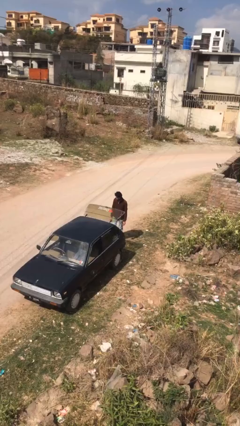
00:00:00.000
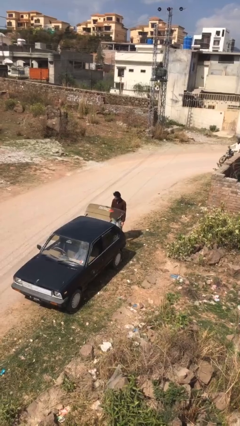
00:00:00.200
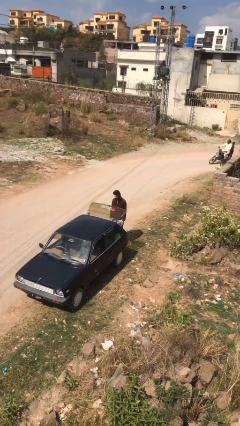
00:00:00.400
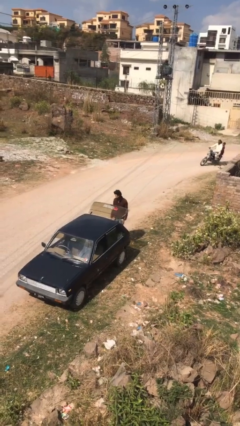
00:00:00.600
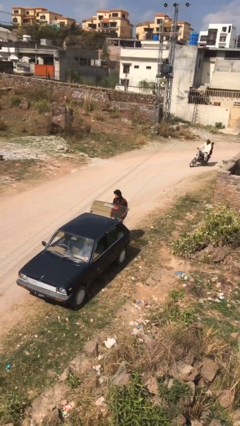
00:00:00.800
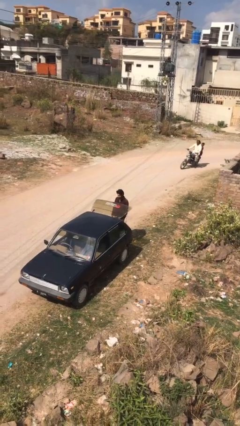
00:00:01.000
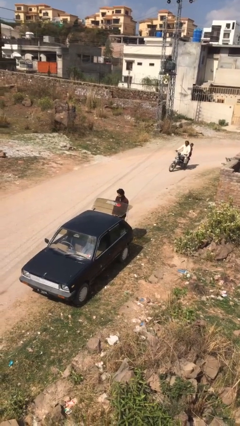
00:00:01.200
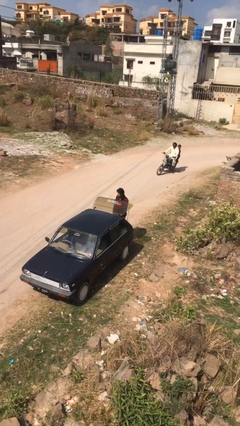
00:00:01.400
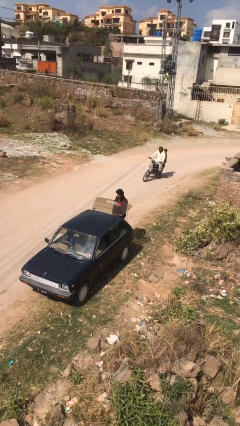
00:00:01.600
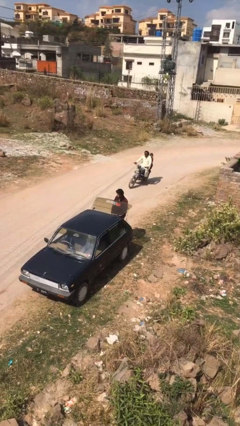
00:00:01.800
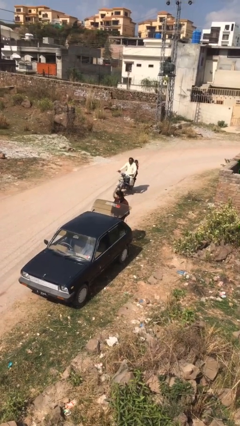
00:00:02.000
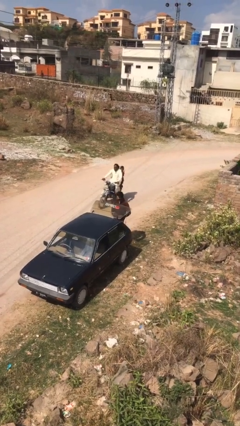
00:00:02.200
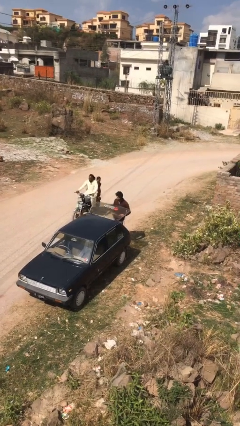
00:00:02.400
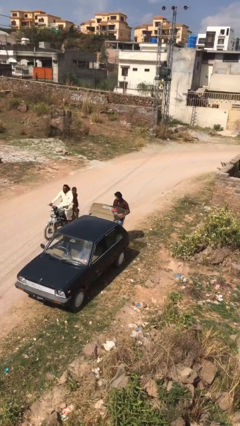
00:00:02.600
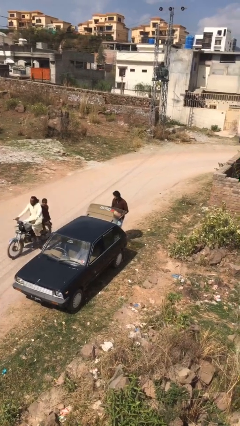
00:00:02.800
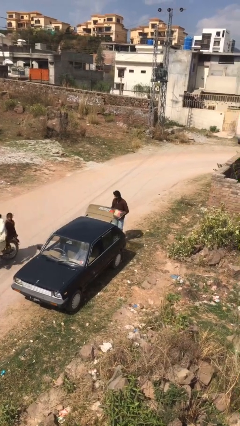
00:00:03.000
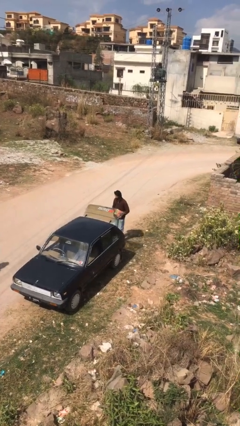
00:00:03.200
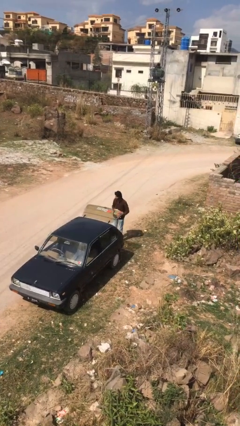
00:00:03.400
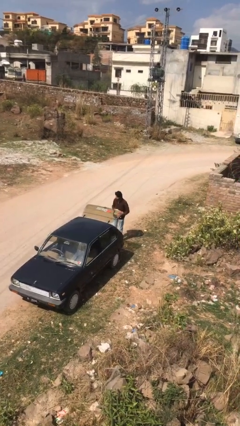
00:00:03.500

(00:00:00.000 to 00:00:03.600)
person unloads car

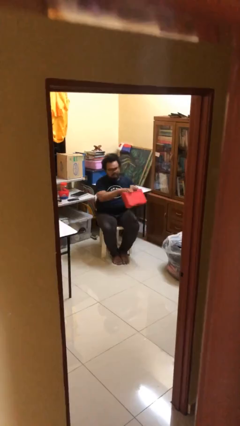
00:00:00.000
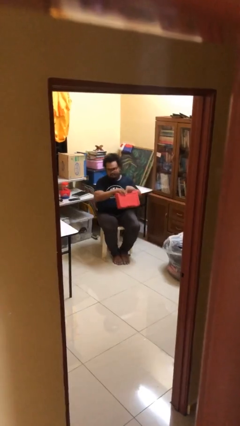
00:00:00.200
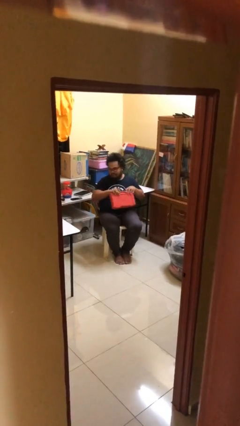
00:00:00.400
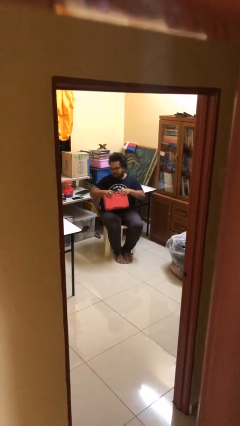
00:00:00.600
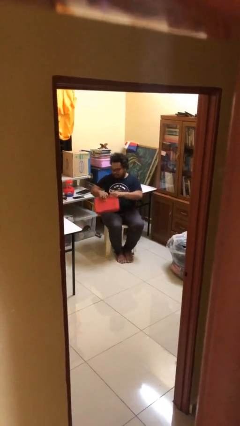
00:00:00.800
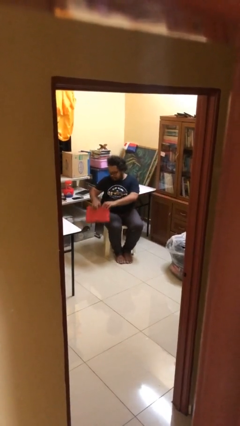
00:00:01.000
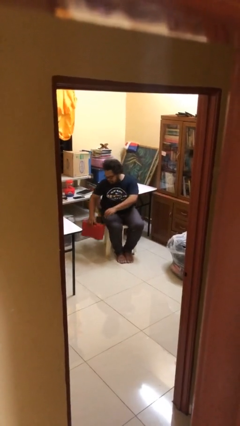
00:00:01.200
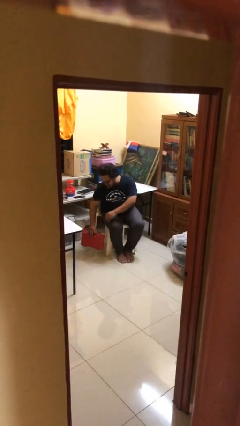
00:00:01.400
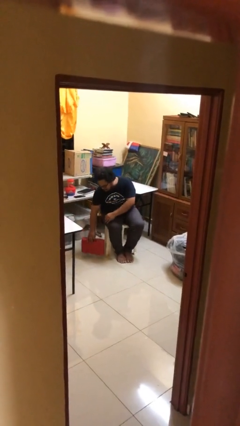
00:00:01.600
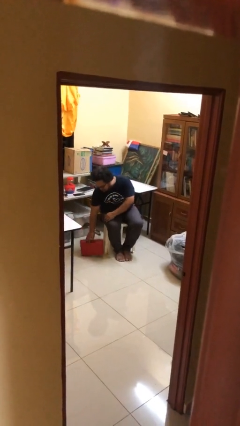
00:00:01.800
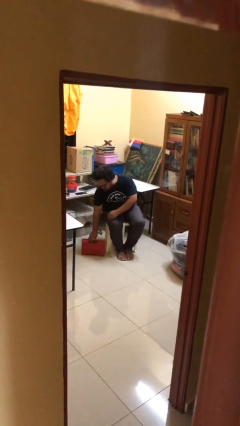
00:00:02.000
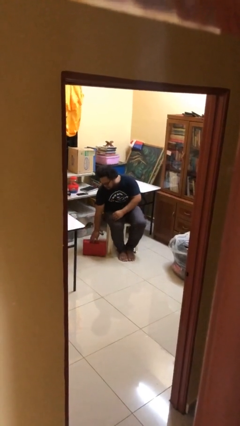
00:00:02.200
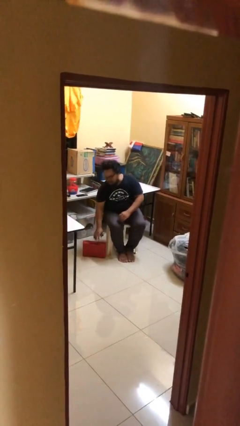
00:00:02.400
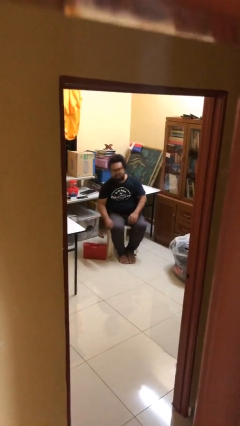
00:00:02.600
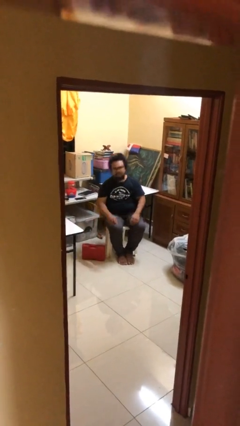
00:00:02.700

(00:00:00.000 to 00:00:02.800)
person puts down object on floor

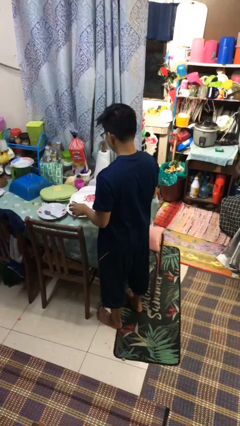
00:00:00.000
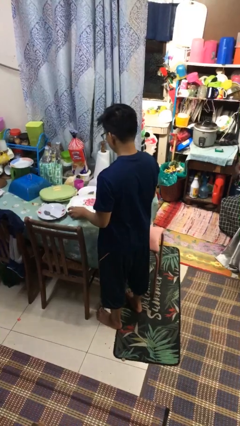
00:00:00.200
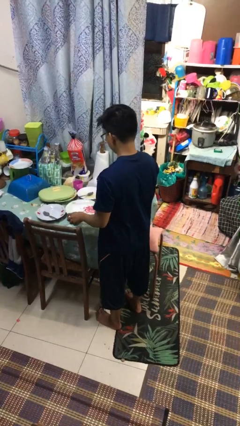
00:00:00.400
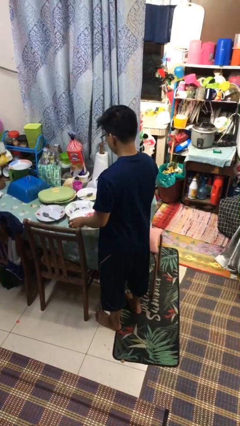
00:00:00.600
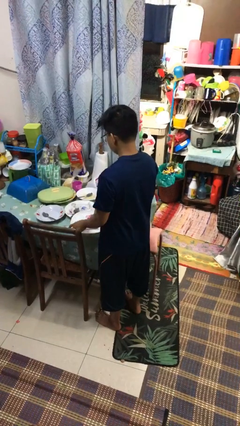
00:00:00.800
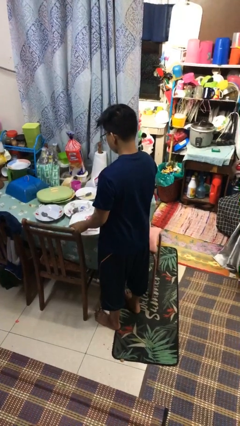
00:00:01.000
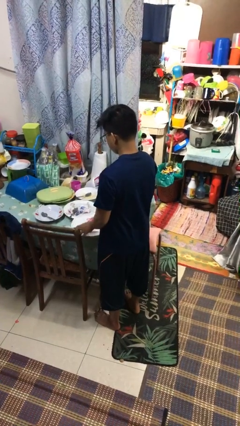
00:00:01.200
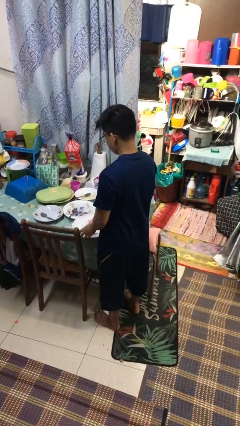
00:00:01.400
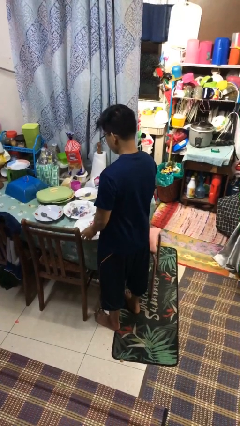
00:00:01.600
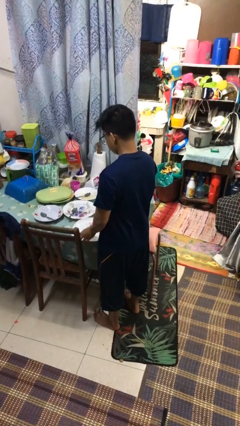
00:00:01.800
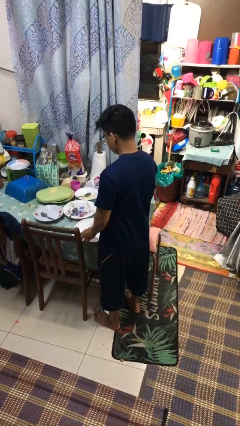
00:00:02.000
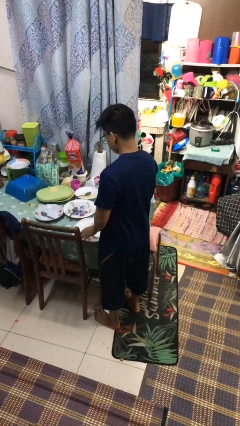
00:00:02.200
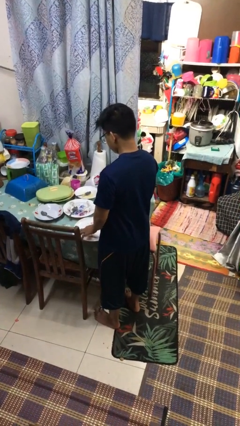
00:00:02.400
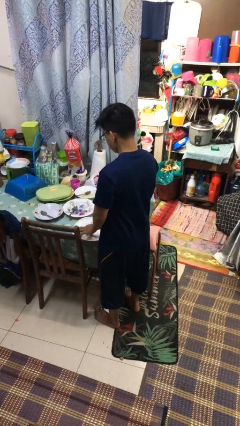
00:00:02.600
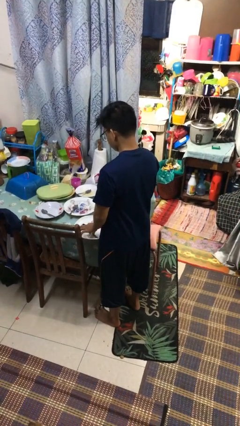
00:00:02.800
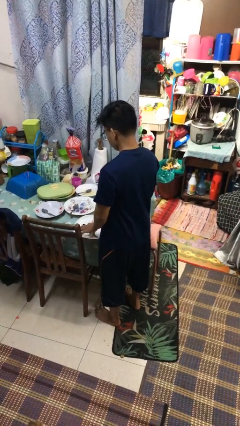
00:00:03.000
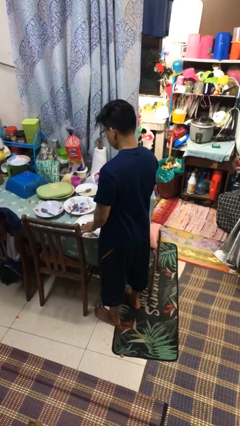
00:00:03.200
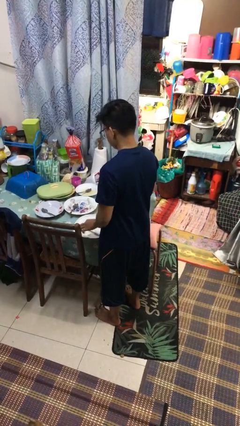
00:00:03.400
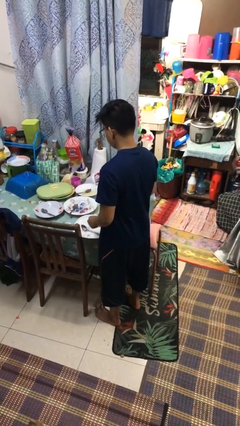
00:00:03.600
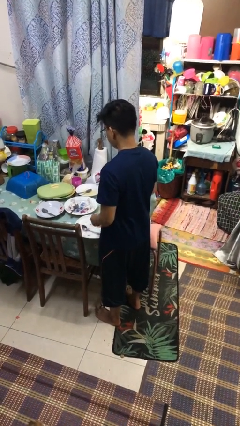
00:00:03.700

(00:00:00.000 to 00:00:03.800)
person sets table

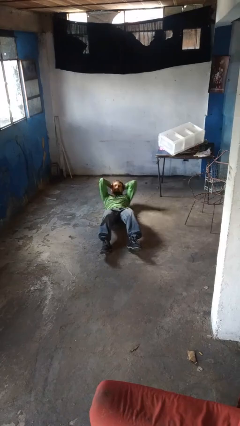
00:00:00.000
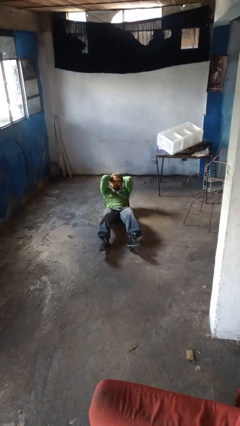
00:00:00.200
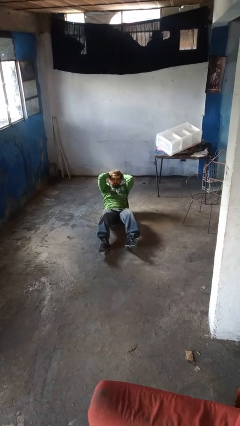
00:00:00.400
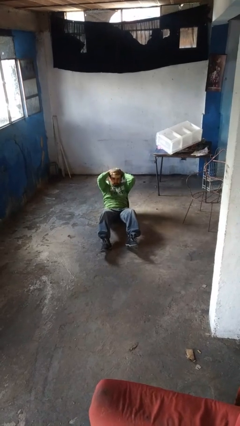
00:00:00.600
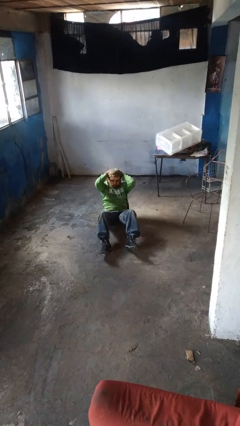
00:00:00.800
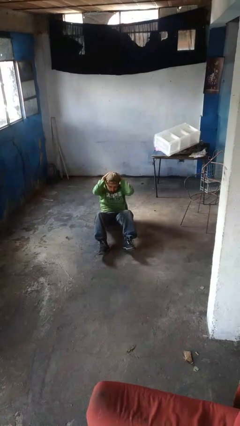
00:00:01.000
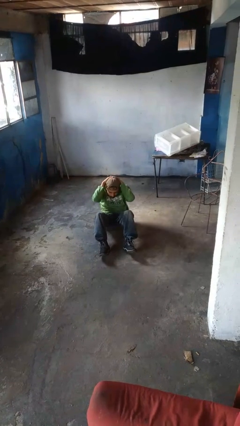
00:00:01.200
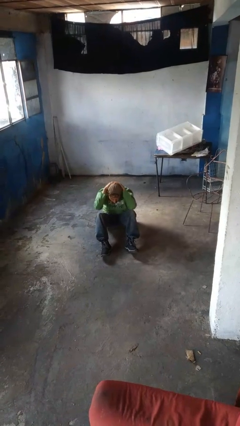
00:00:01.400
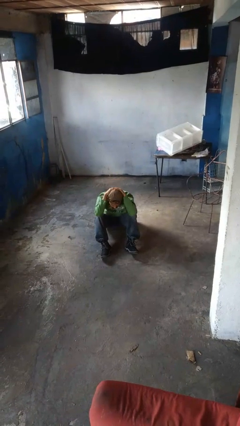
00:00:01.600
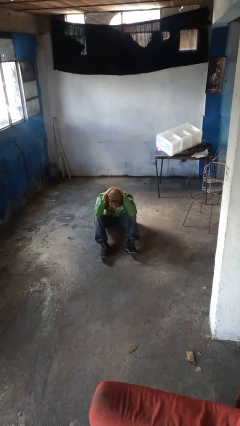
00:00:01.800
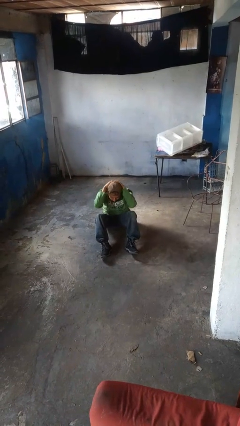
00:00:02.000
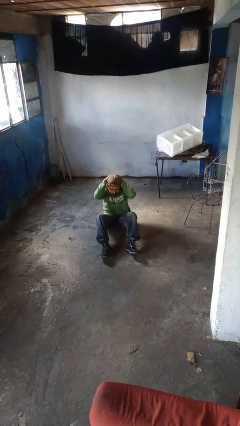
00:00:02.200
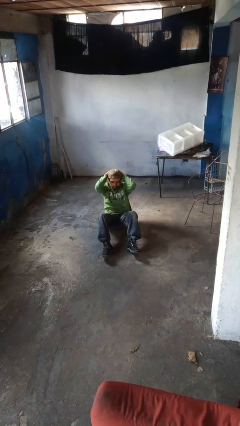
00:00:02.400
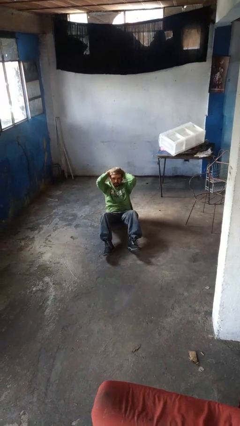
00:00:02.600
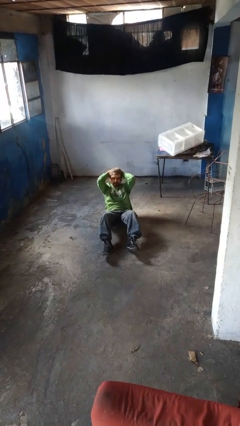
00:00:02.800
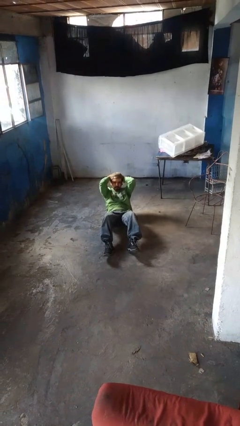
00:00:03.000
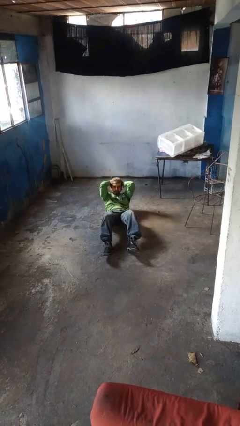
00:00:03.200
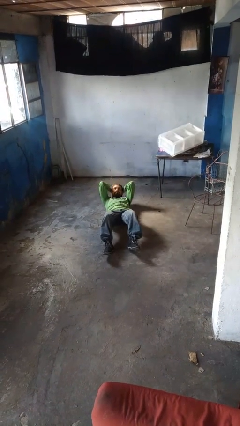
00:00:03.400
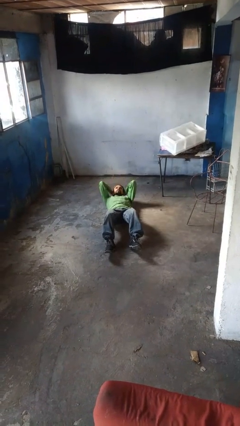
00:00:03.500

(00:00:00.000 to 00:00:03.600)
person exercises with situp

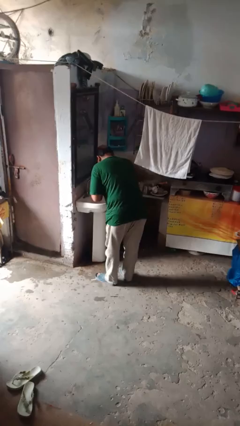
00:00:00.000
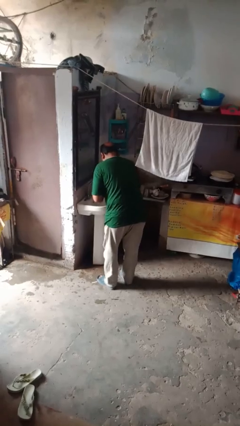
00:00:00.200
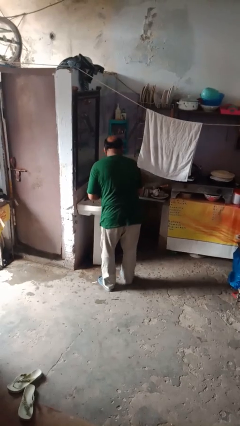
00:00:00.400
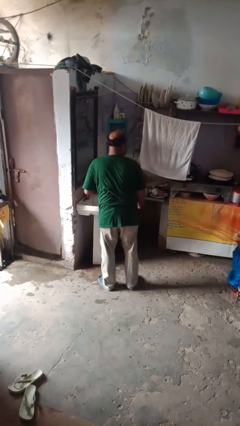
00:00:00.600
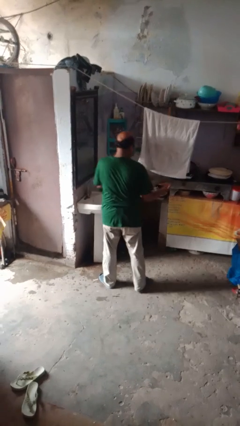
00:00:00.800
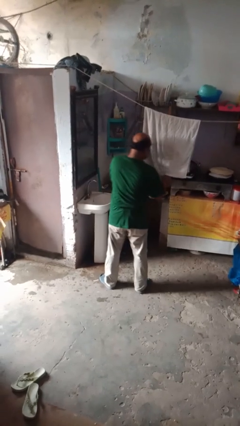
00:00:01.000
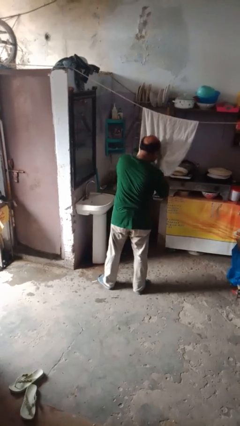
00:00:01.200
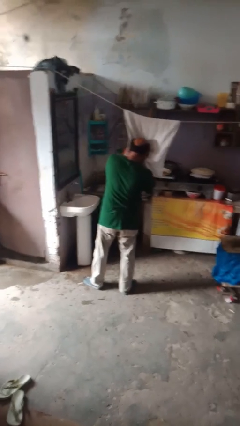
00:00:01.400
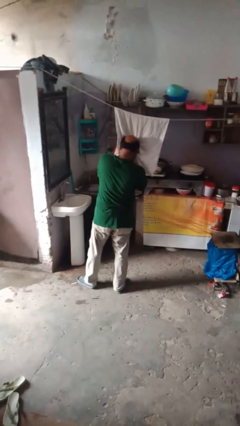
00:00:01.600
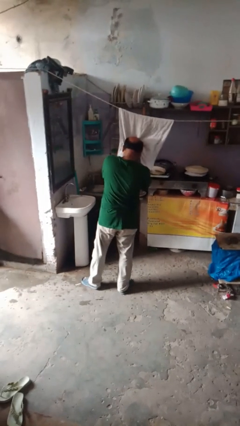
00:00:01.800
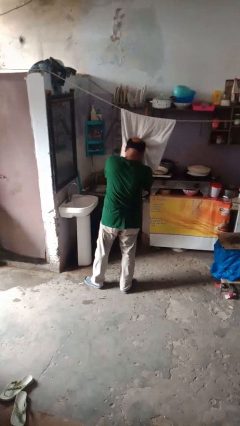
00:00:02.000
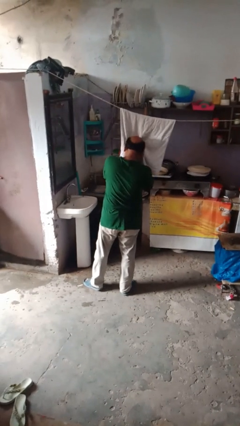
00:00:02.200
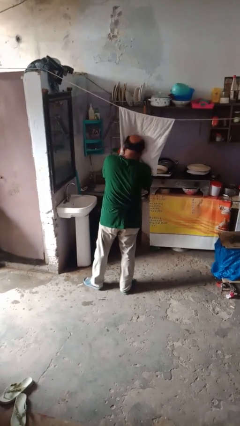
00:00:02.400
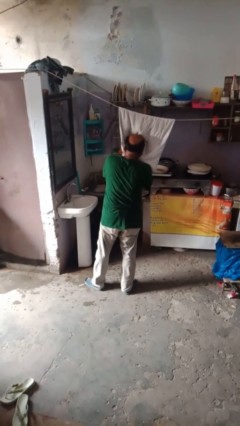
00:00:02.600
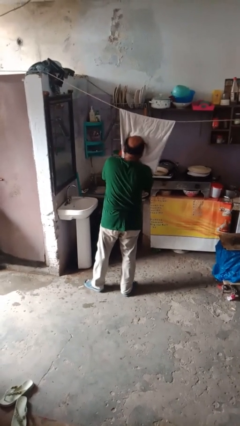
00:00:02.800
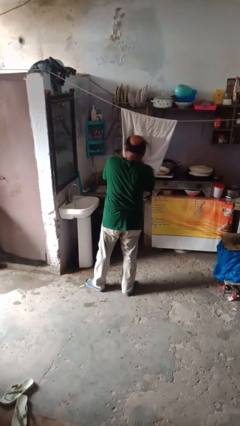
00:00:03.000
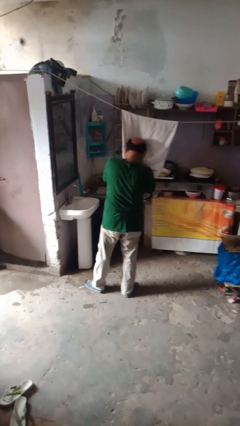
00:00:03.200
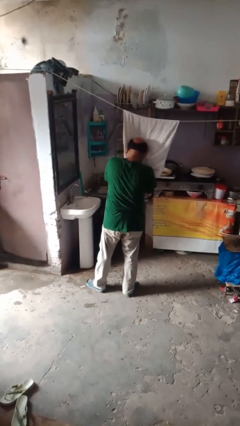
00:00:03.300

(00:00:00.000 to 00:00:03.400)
person dries face with towel
